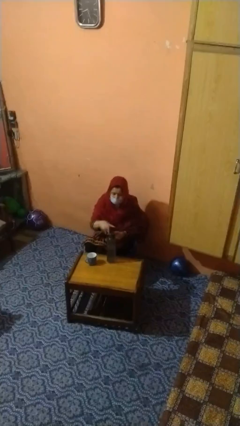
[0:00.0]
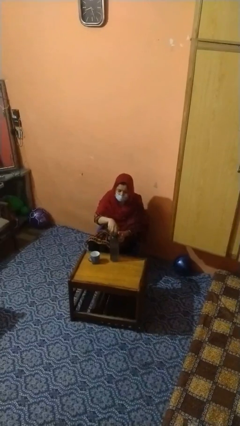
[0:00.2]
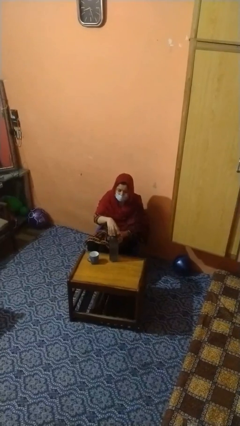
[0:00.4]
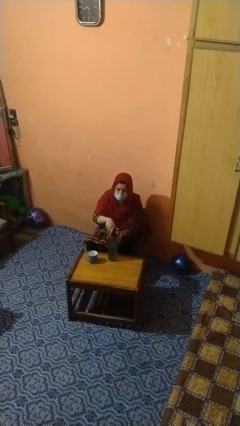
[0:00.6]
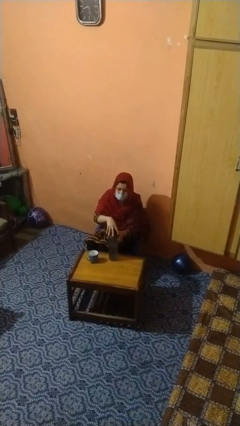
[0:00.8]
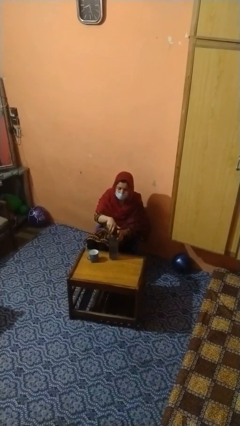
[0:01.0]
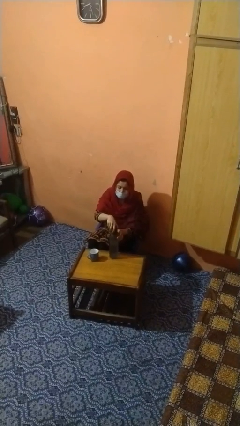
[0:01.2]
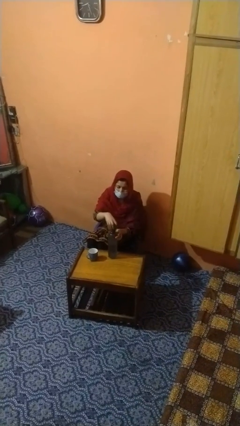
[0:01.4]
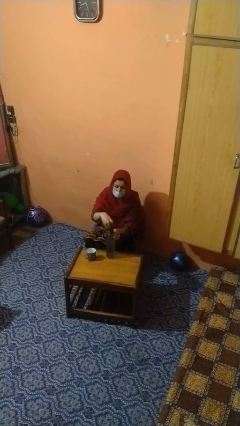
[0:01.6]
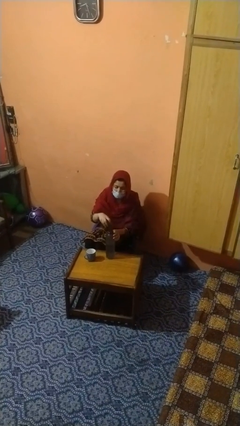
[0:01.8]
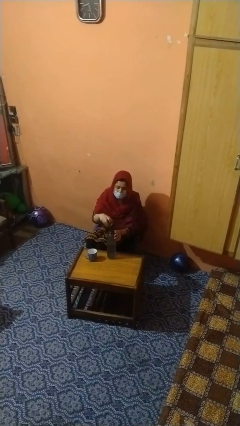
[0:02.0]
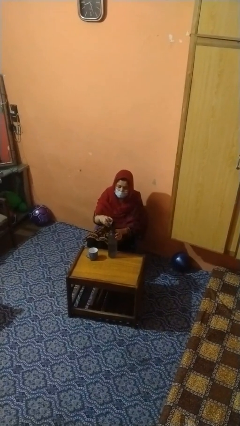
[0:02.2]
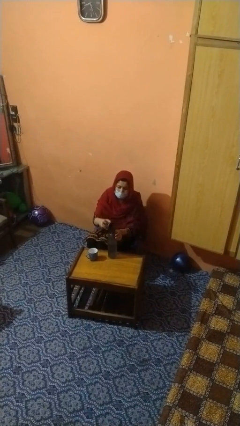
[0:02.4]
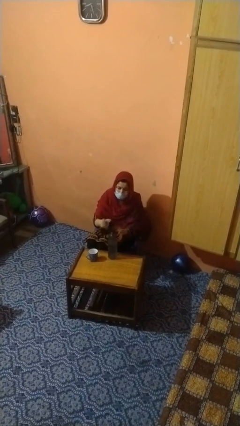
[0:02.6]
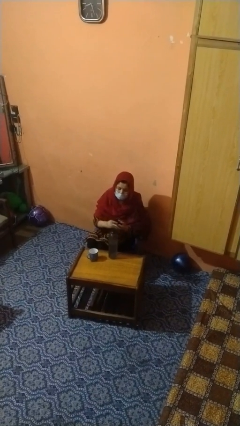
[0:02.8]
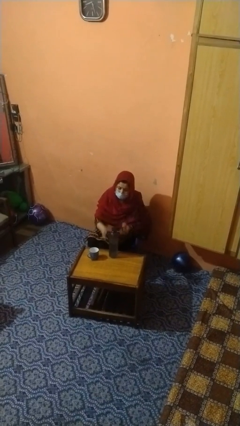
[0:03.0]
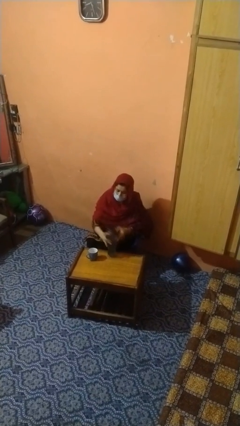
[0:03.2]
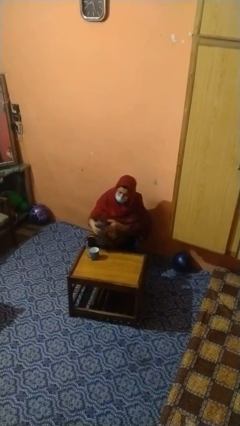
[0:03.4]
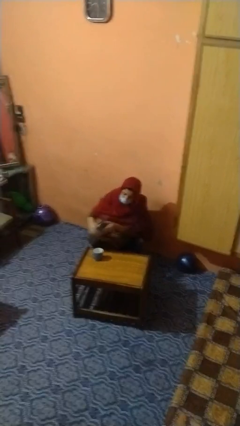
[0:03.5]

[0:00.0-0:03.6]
person unscrews lid from bottle

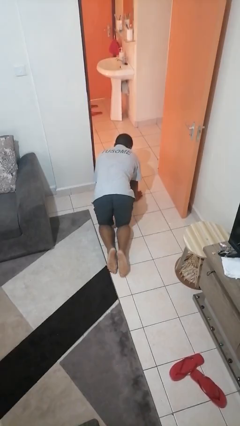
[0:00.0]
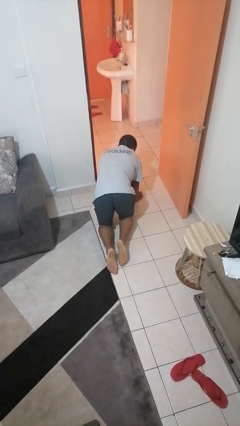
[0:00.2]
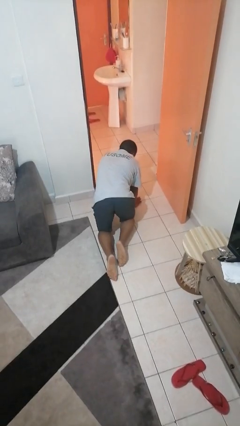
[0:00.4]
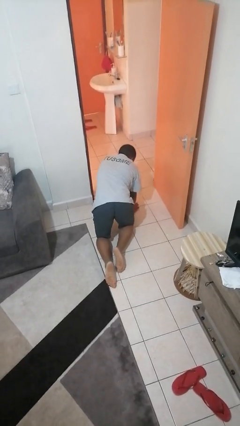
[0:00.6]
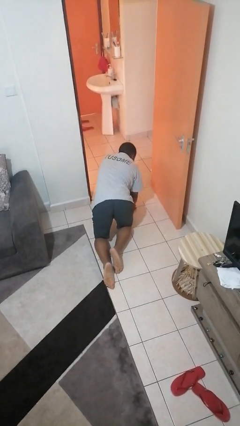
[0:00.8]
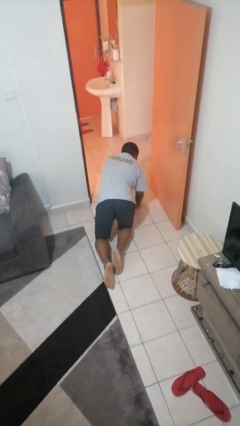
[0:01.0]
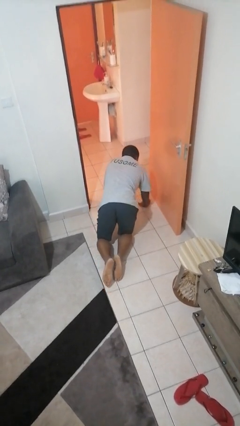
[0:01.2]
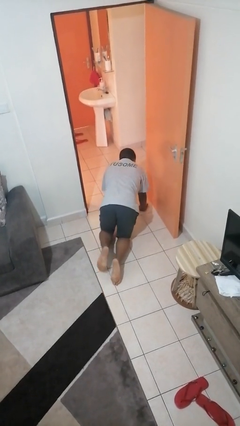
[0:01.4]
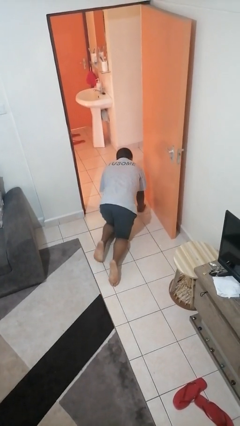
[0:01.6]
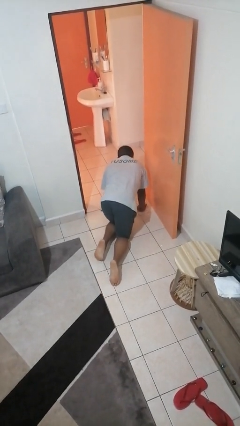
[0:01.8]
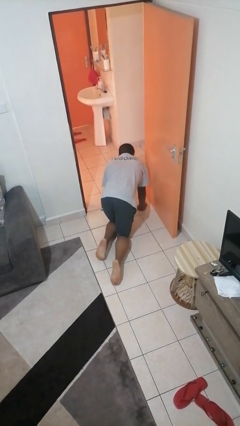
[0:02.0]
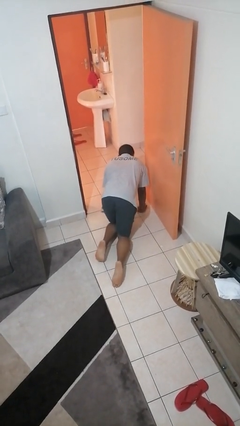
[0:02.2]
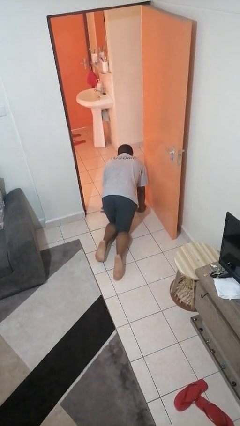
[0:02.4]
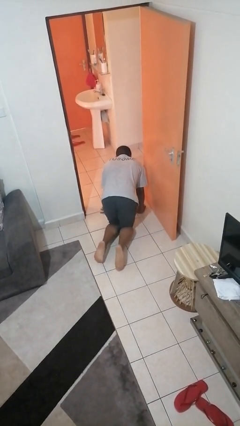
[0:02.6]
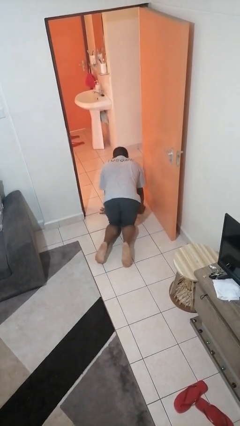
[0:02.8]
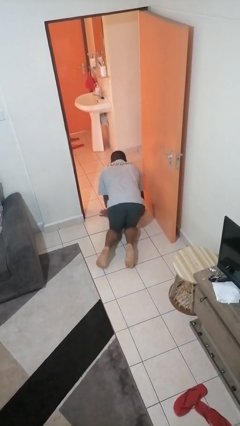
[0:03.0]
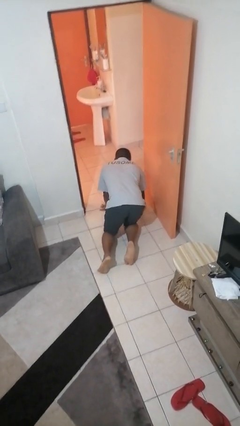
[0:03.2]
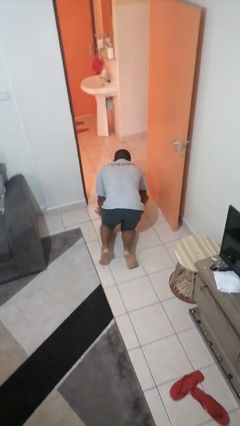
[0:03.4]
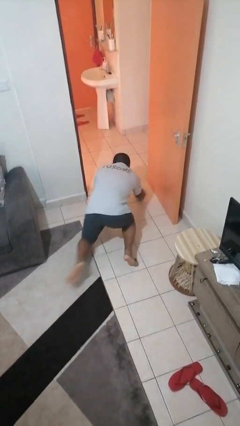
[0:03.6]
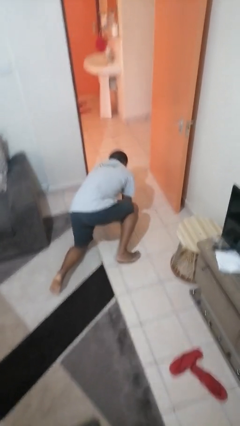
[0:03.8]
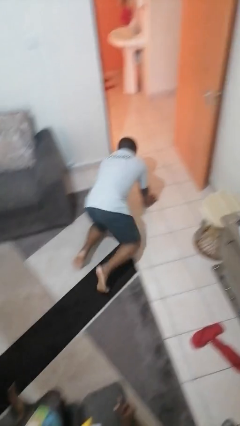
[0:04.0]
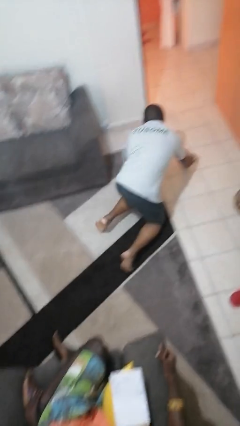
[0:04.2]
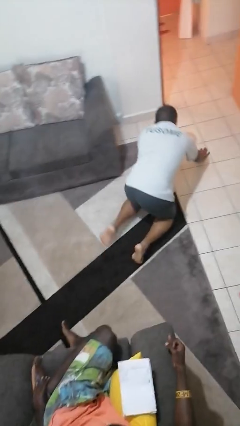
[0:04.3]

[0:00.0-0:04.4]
person crawls

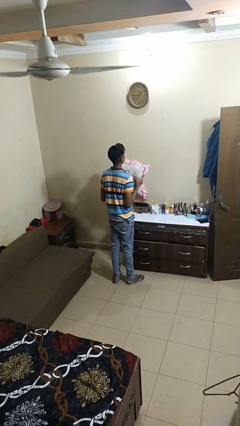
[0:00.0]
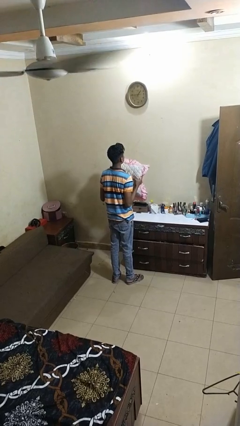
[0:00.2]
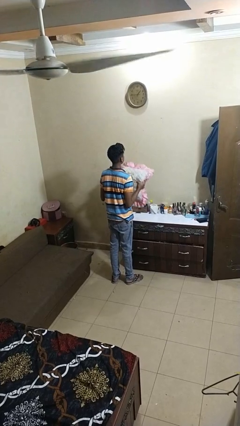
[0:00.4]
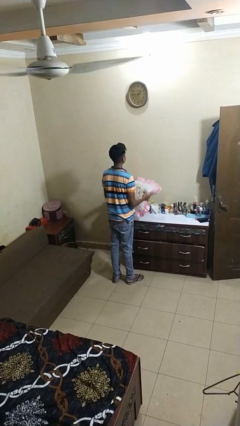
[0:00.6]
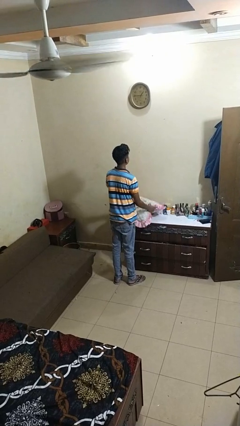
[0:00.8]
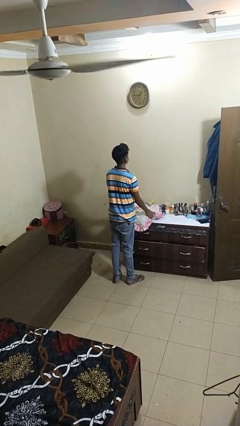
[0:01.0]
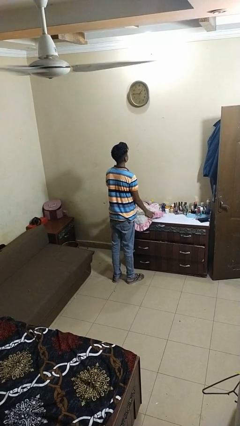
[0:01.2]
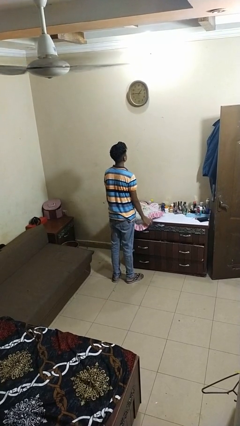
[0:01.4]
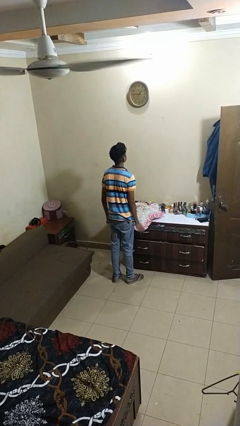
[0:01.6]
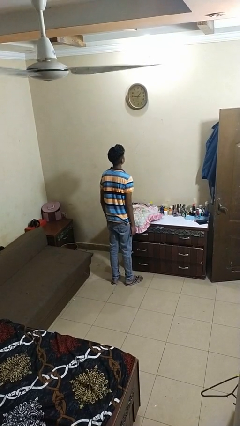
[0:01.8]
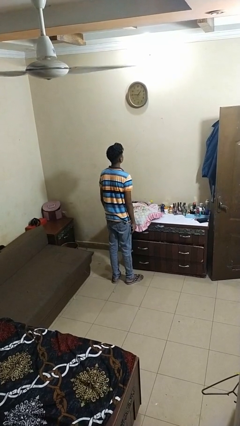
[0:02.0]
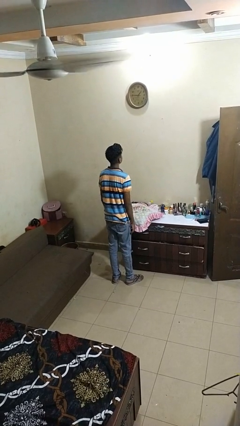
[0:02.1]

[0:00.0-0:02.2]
person puts down object on countertop

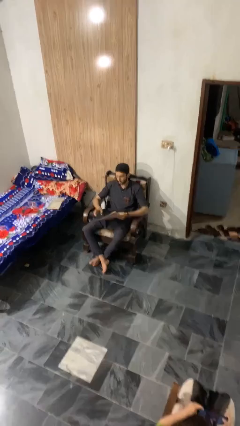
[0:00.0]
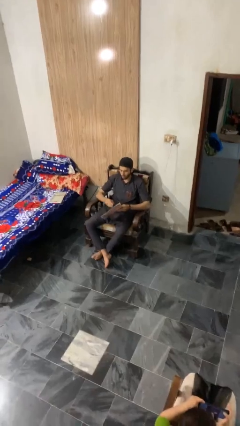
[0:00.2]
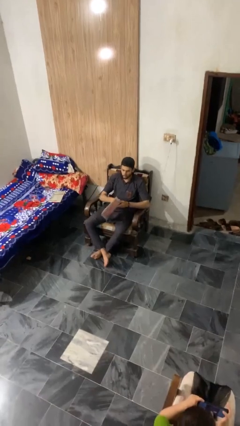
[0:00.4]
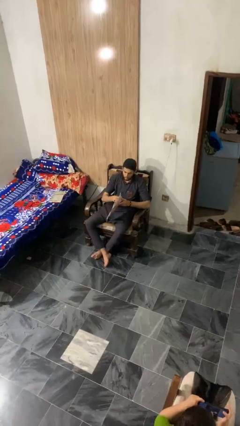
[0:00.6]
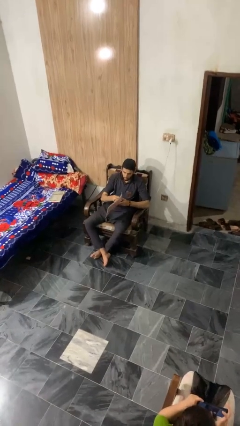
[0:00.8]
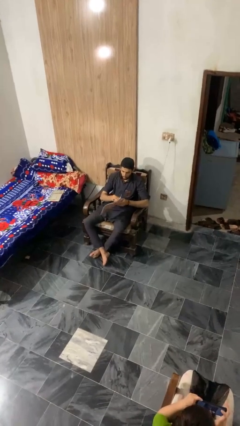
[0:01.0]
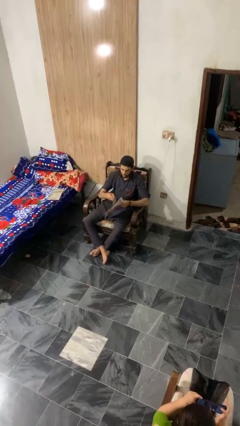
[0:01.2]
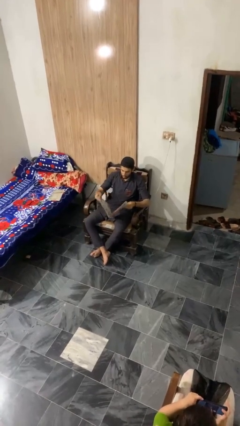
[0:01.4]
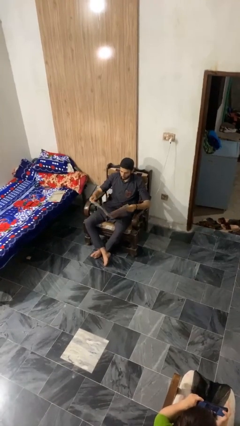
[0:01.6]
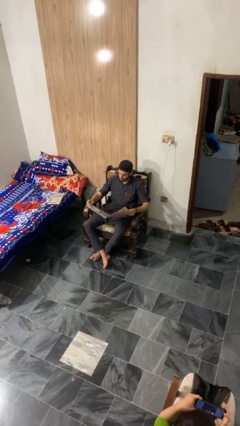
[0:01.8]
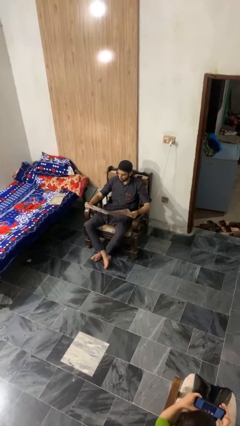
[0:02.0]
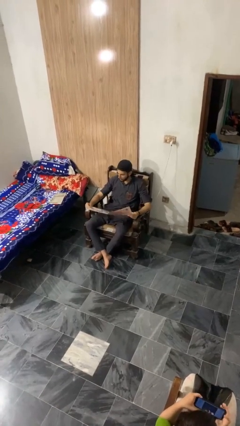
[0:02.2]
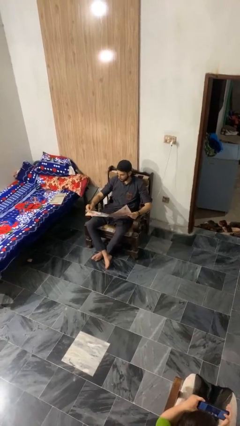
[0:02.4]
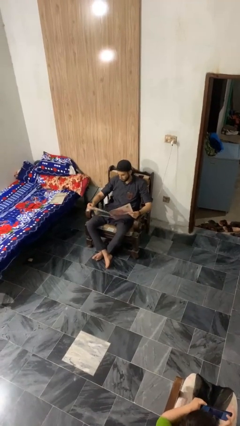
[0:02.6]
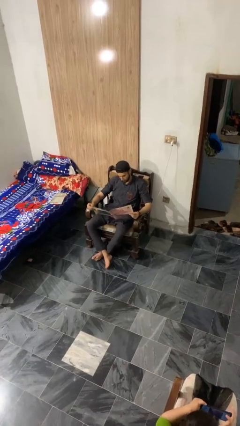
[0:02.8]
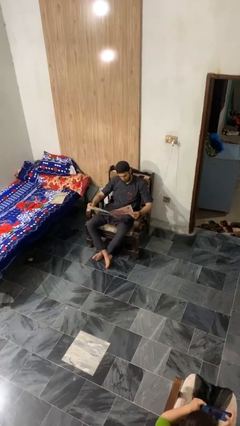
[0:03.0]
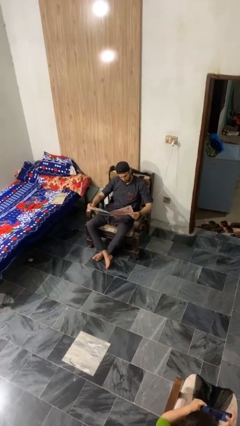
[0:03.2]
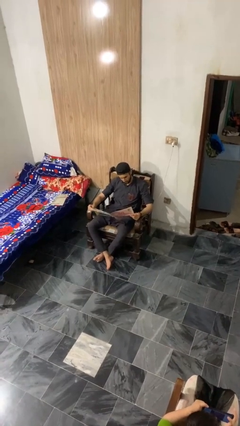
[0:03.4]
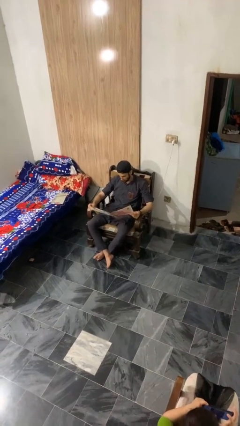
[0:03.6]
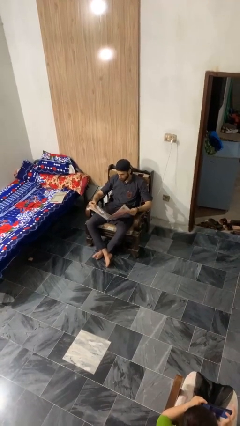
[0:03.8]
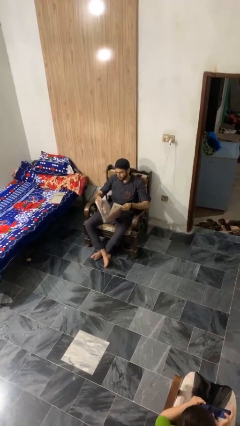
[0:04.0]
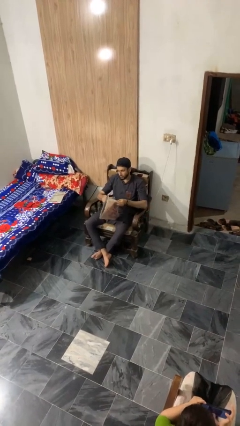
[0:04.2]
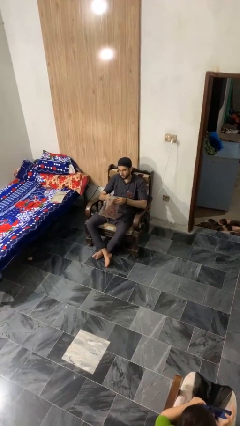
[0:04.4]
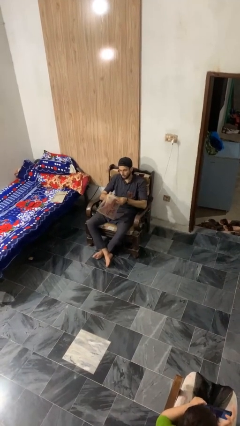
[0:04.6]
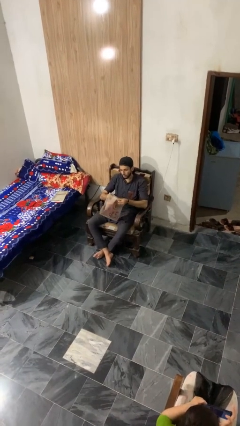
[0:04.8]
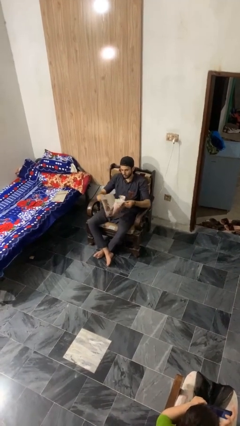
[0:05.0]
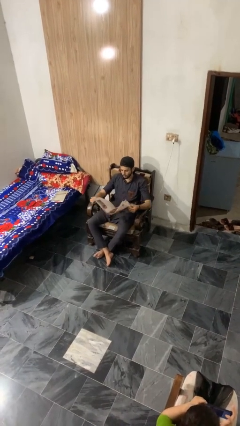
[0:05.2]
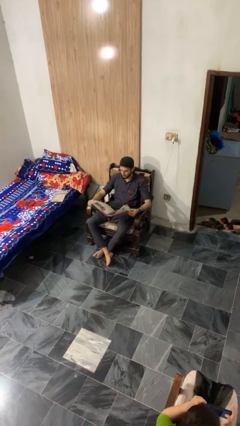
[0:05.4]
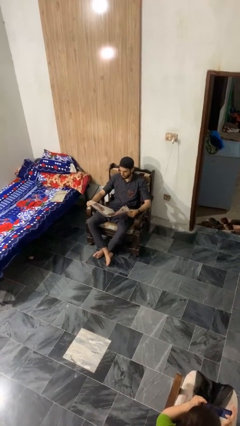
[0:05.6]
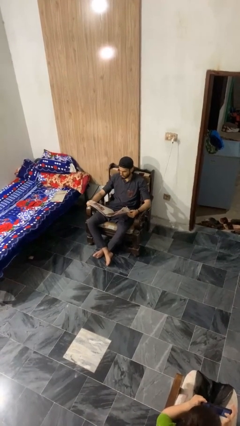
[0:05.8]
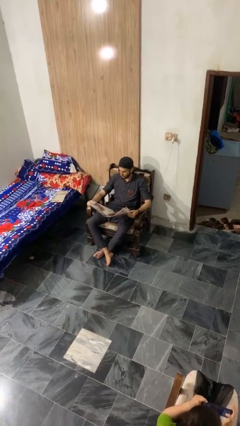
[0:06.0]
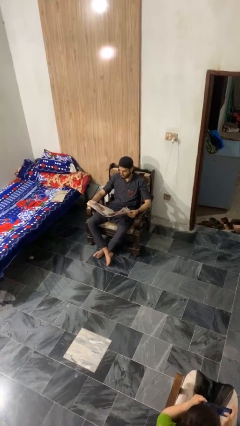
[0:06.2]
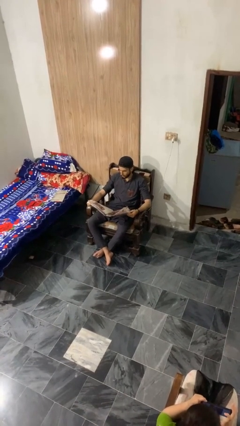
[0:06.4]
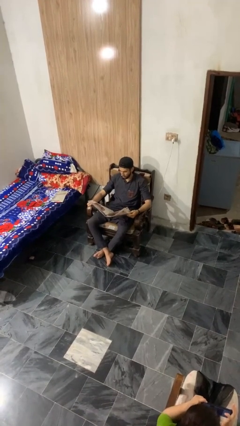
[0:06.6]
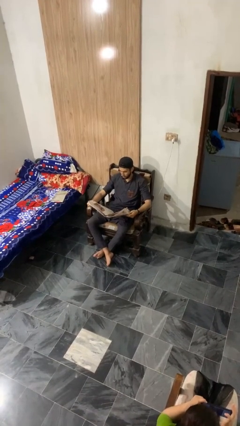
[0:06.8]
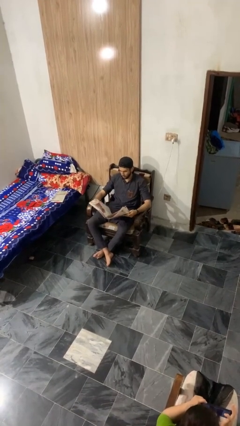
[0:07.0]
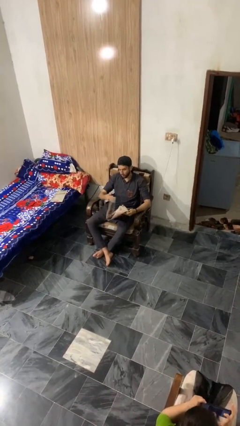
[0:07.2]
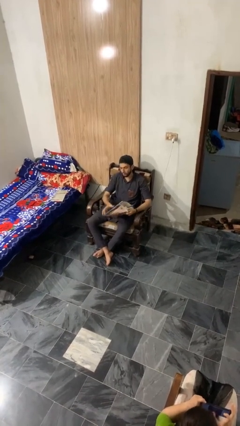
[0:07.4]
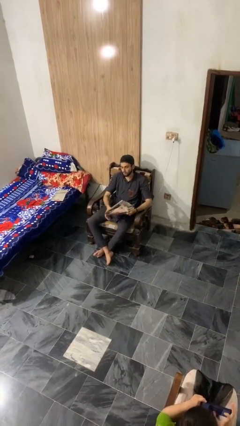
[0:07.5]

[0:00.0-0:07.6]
person reads magazine

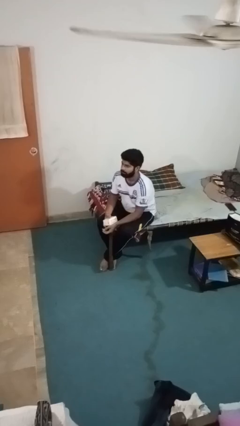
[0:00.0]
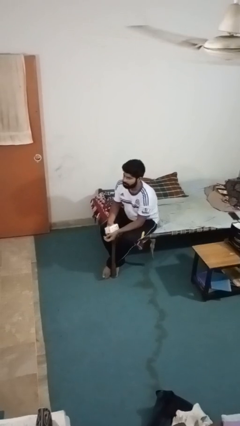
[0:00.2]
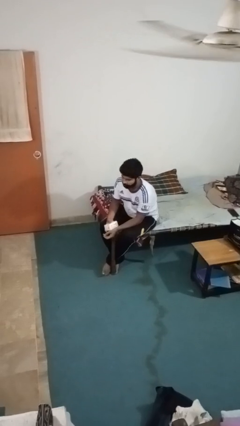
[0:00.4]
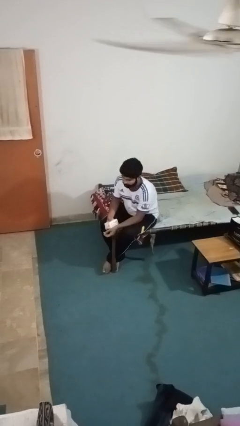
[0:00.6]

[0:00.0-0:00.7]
person picks up object from floor
